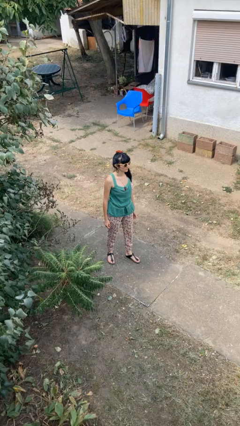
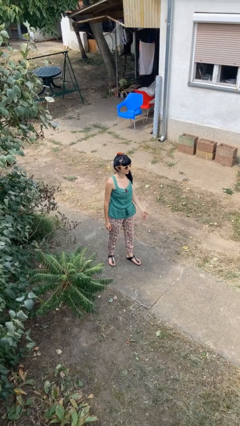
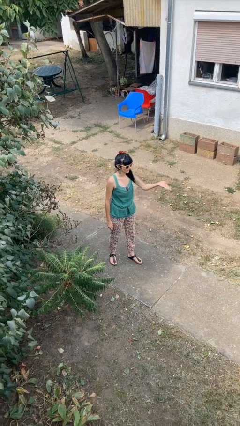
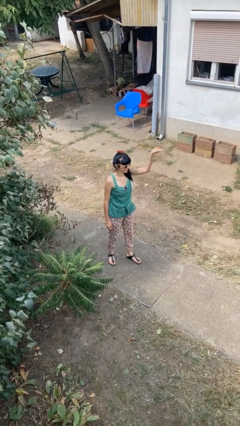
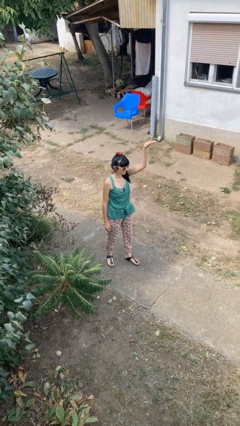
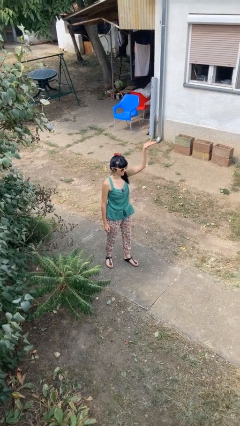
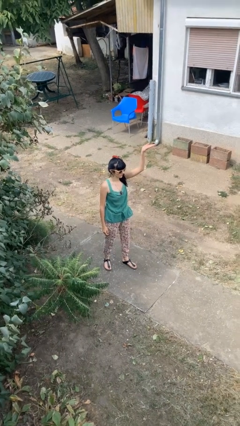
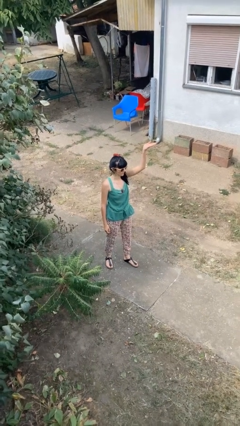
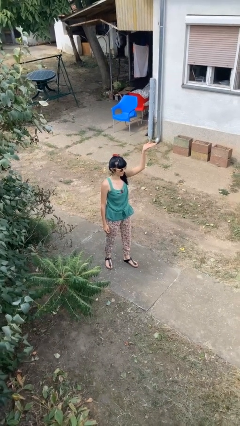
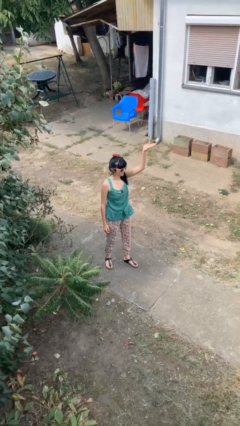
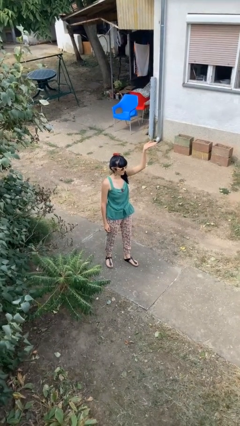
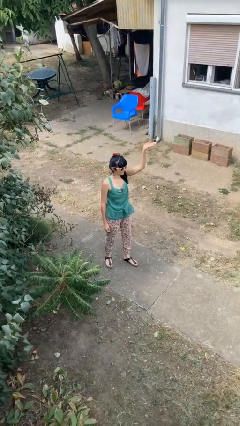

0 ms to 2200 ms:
person gestures swipe up

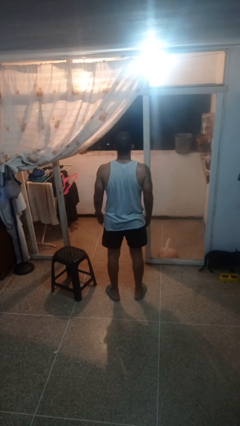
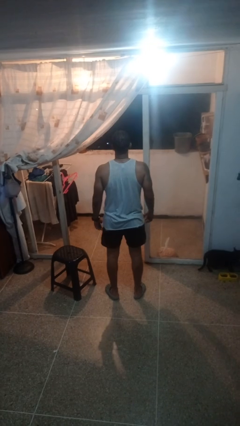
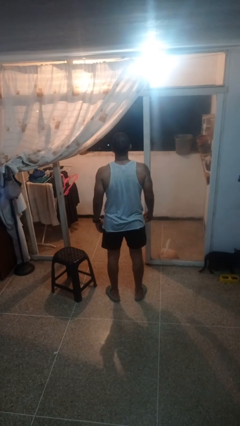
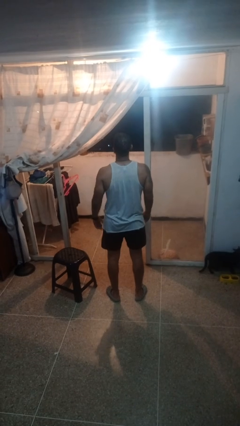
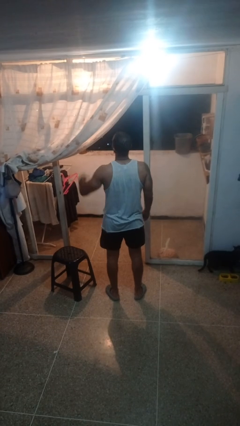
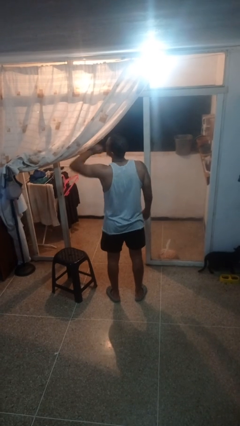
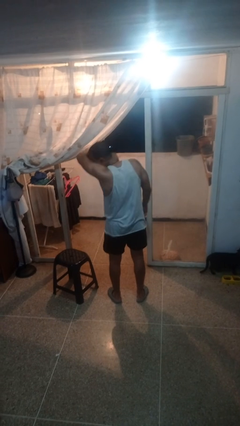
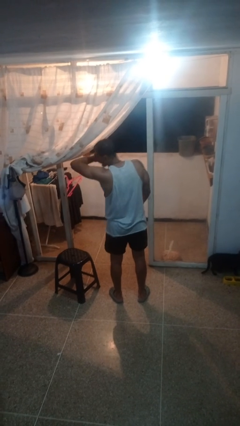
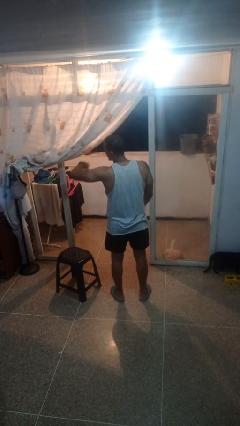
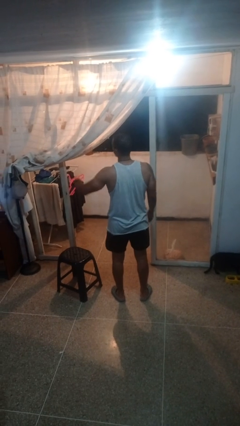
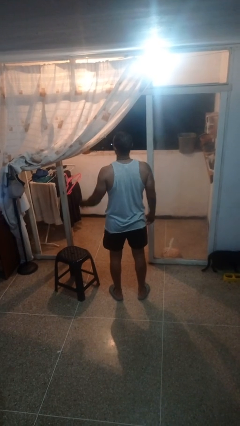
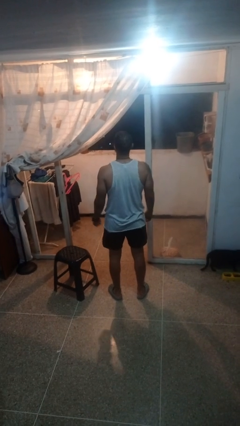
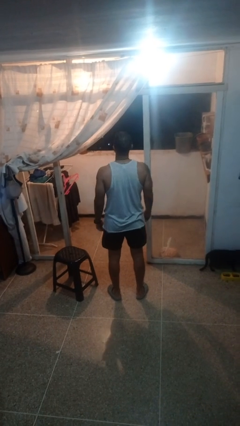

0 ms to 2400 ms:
person sneezes into arm

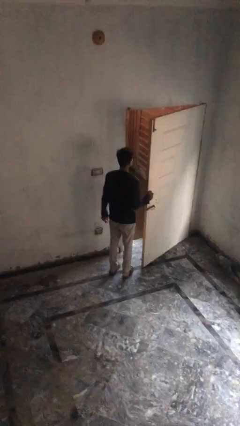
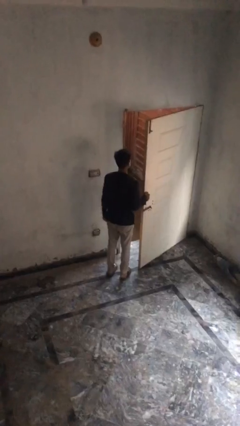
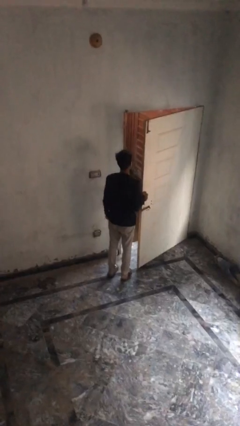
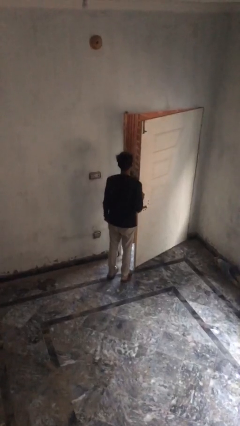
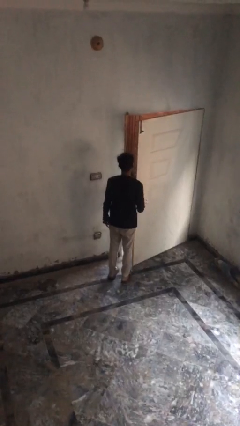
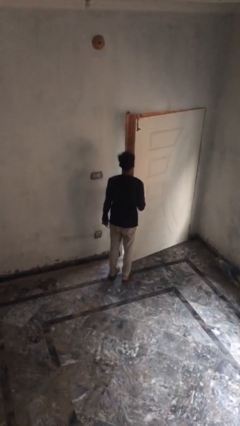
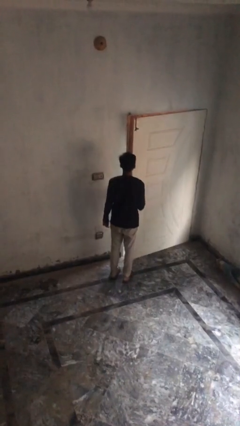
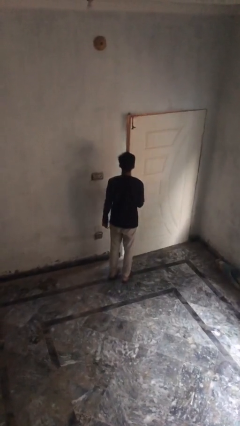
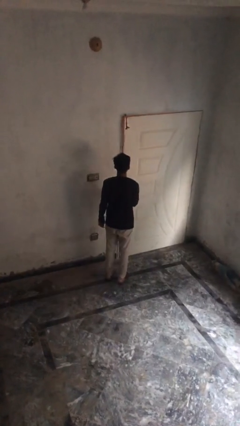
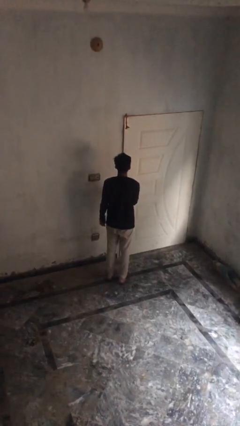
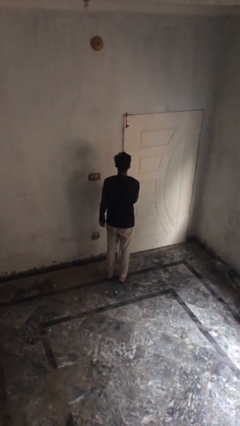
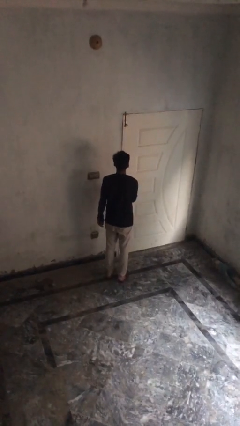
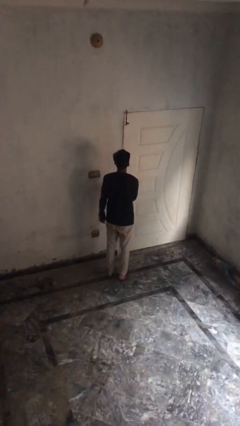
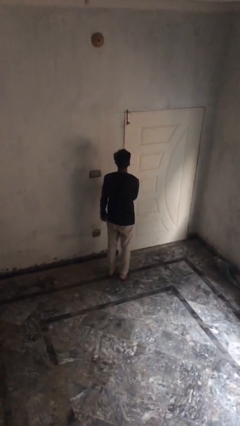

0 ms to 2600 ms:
person closes facility door

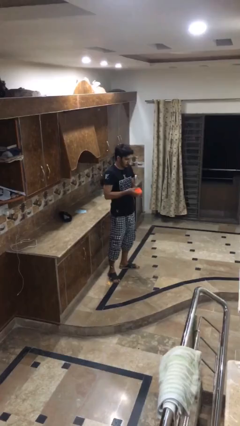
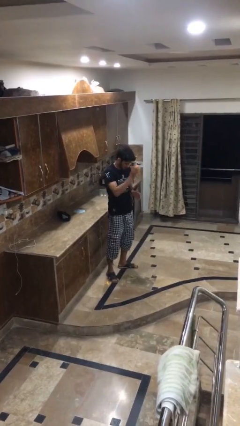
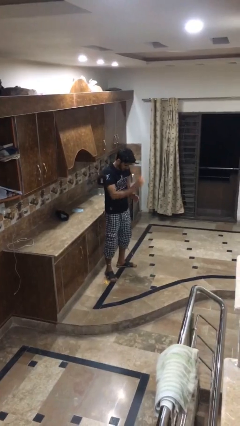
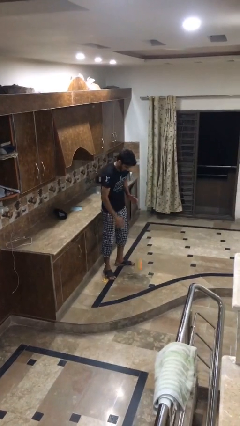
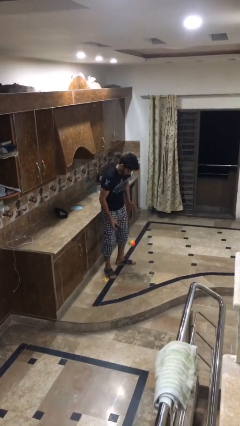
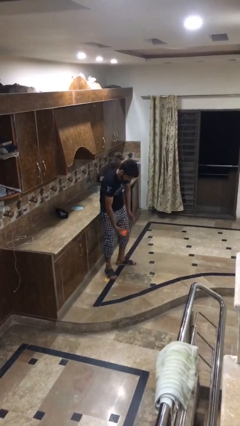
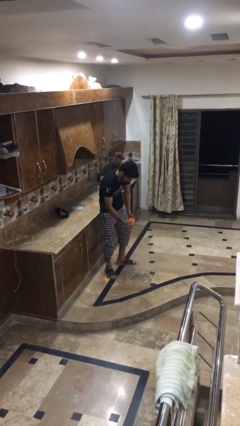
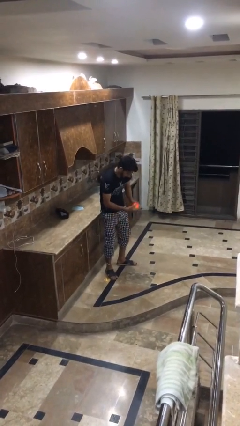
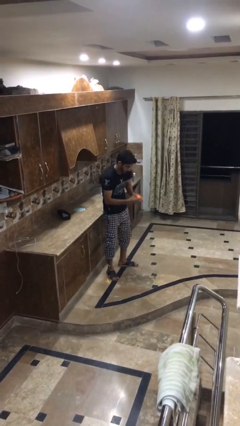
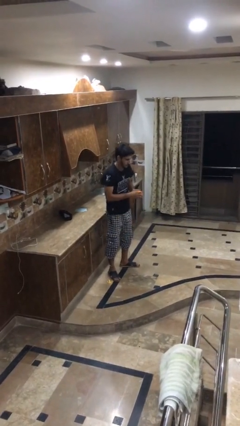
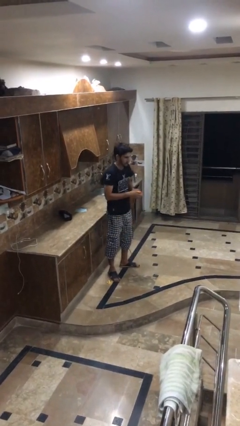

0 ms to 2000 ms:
person bounces ball on floor

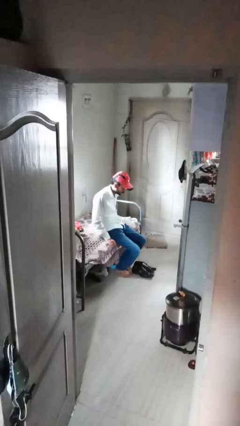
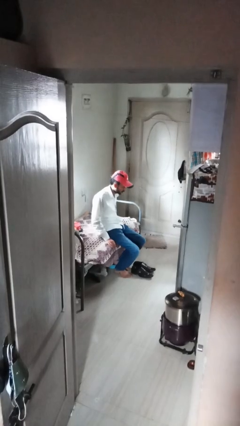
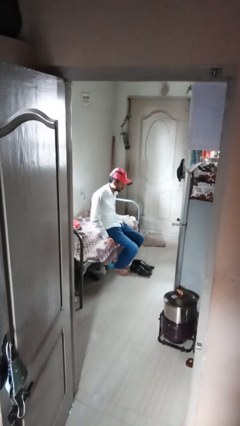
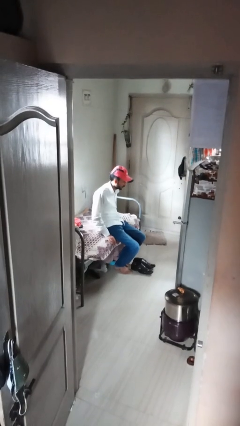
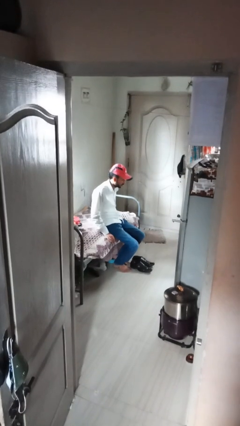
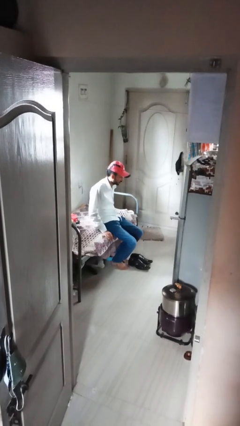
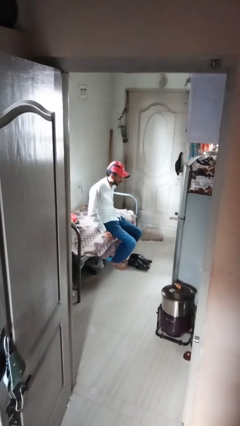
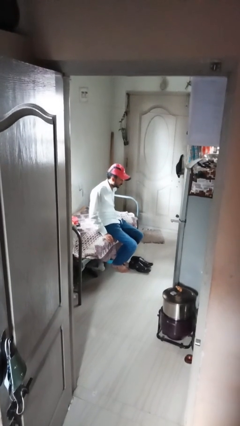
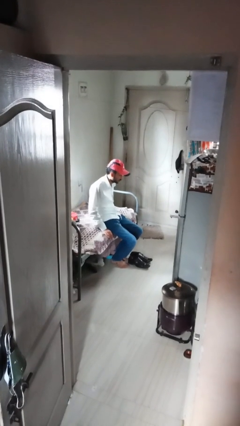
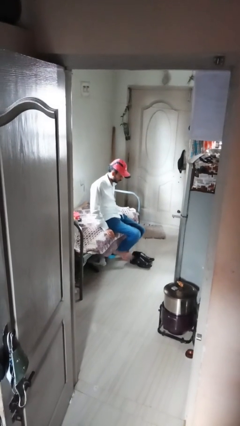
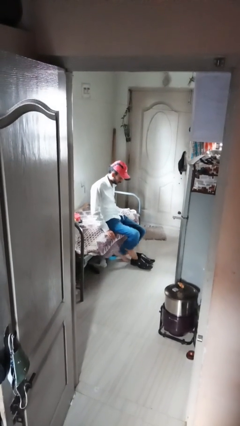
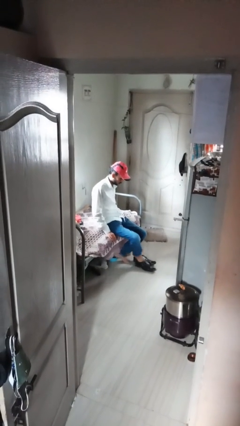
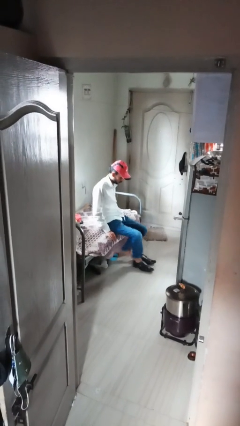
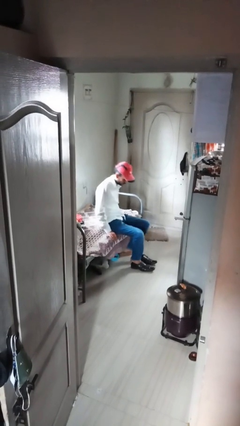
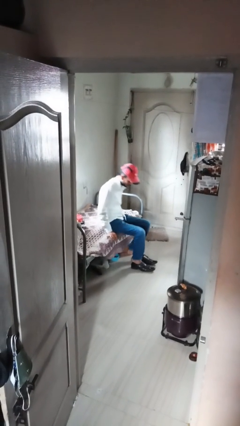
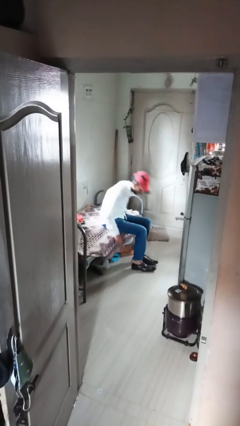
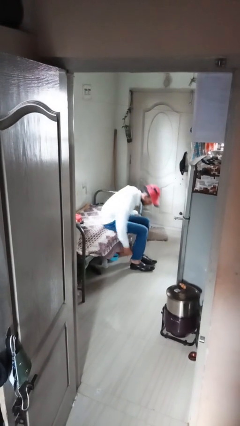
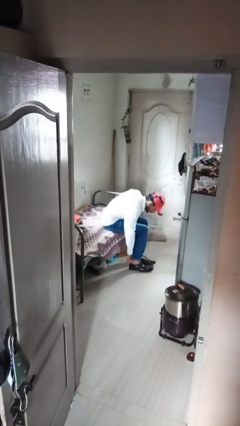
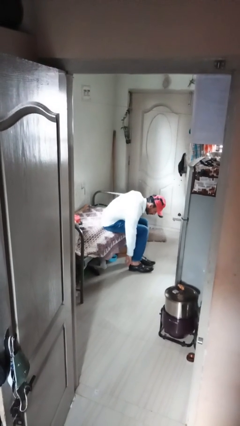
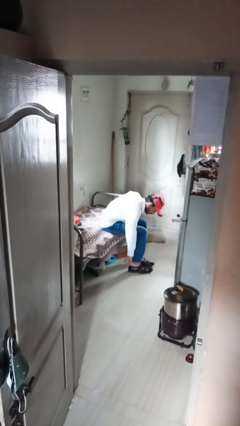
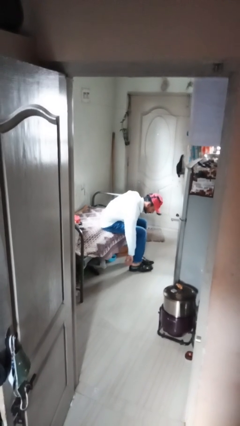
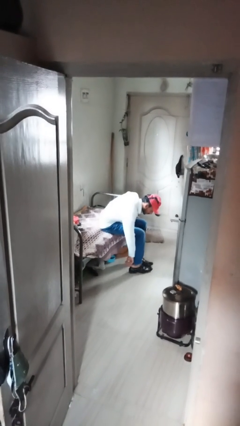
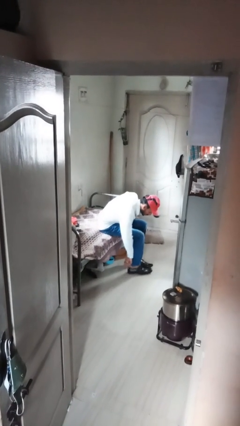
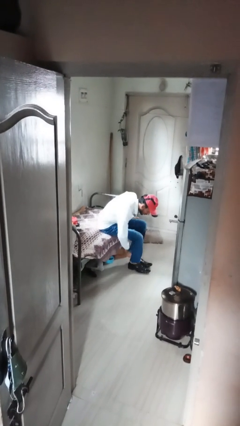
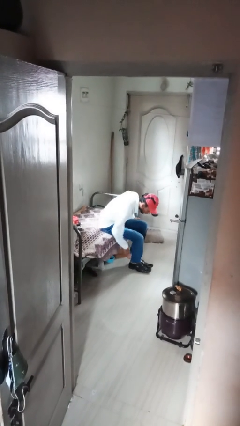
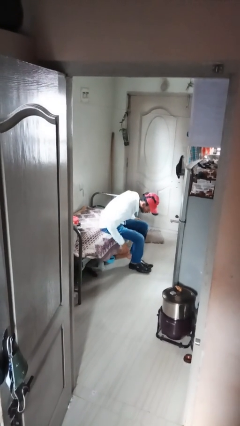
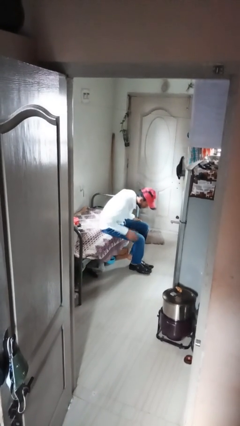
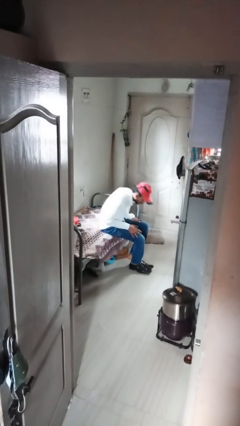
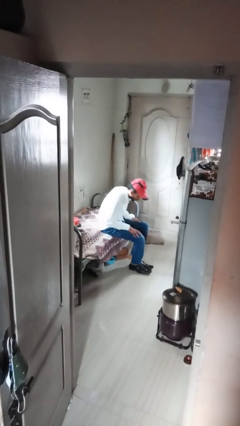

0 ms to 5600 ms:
person puts on shoes

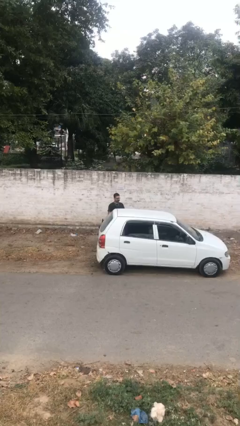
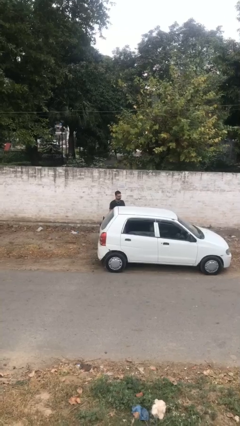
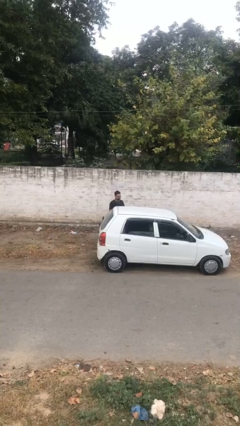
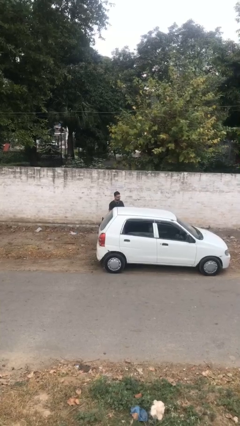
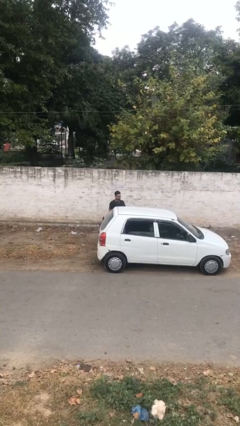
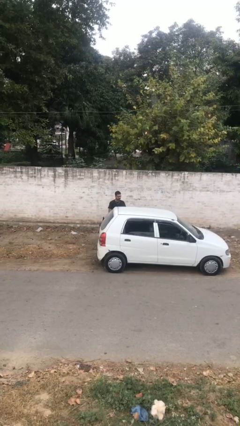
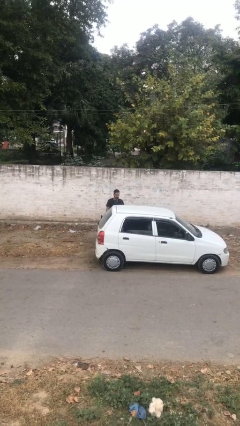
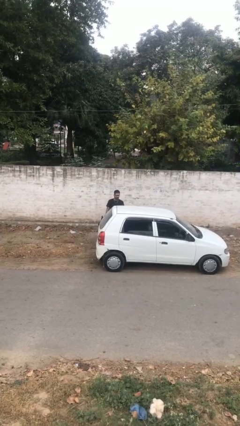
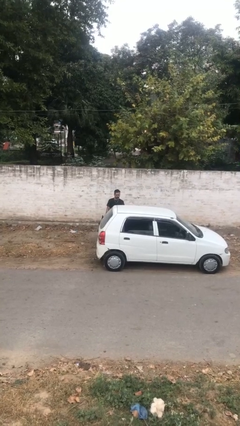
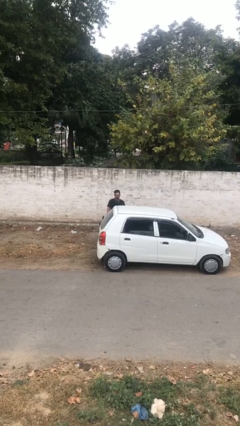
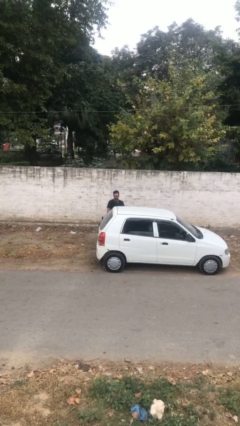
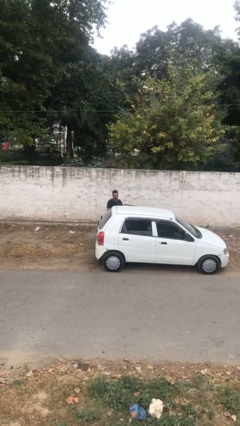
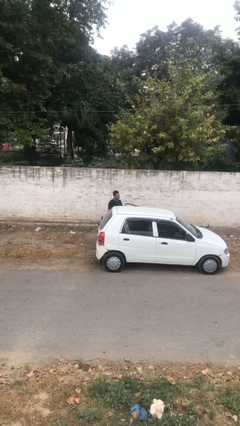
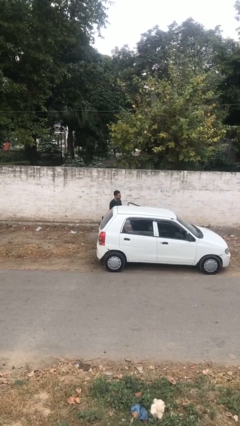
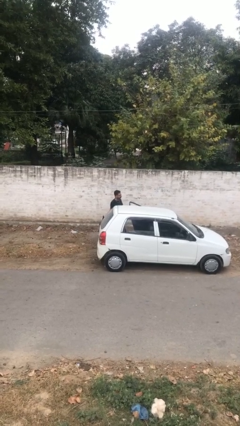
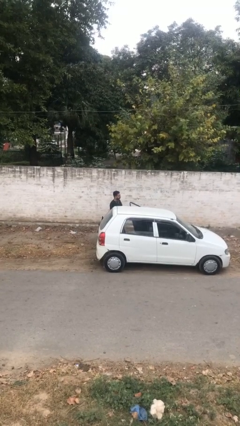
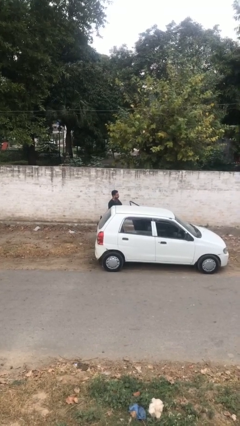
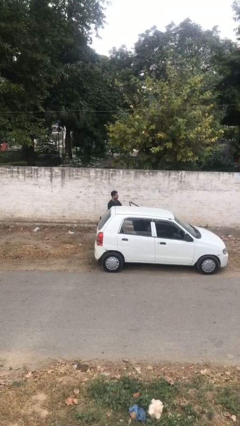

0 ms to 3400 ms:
person opens car door
